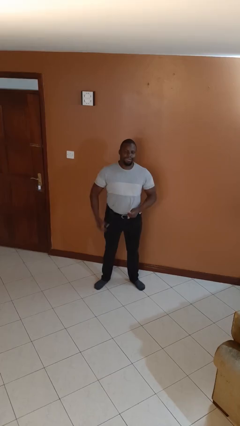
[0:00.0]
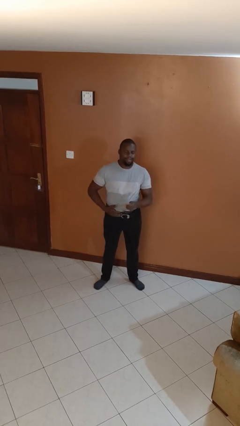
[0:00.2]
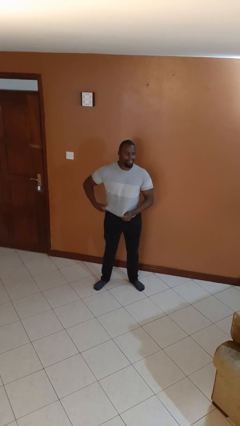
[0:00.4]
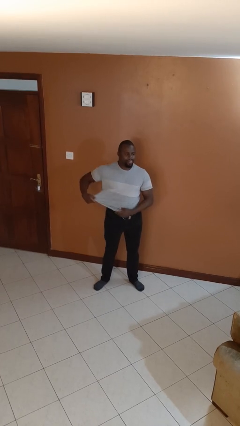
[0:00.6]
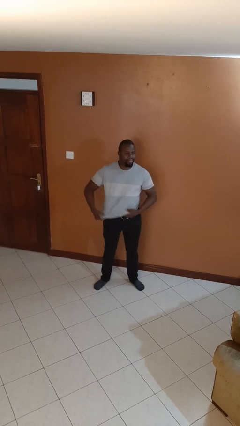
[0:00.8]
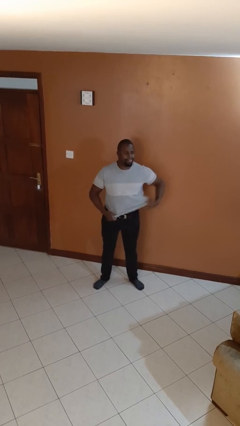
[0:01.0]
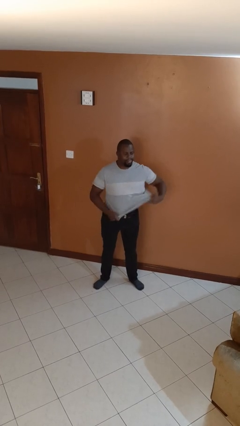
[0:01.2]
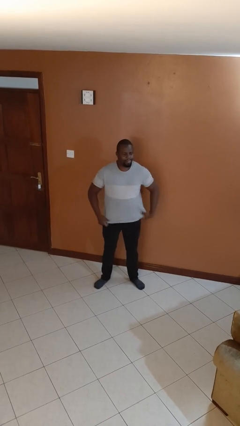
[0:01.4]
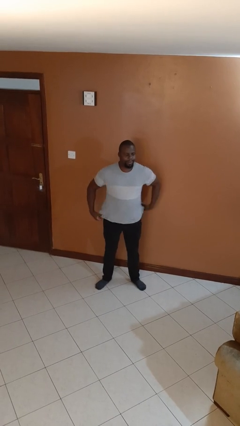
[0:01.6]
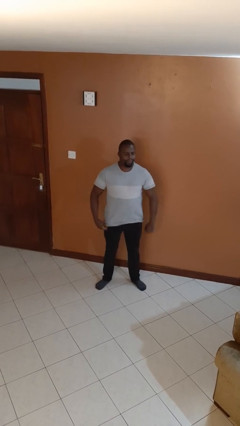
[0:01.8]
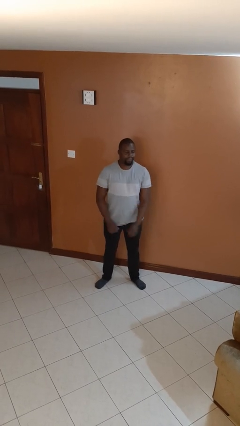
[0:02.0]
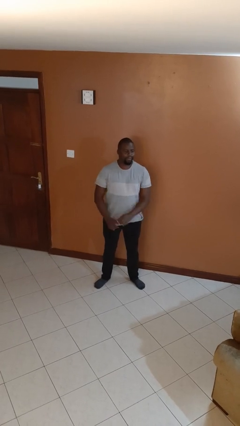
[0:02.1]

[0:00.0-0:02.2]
person untucks shirt

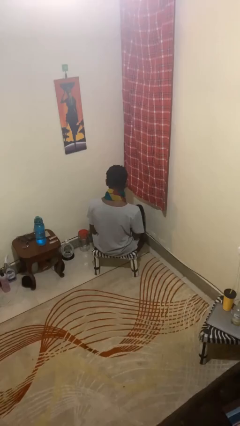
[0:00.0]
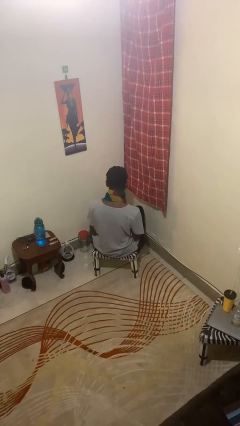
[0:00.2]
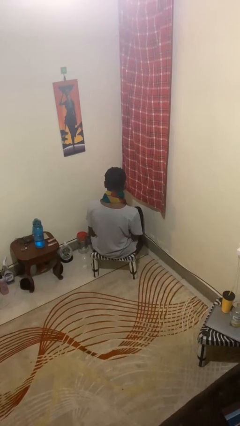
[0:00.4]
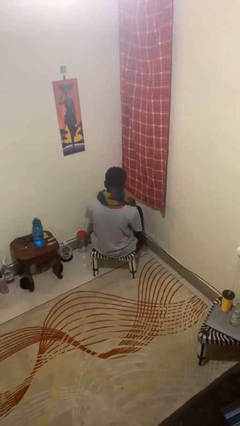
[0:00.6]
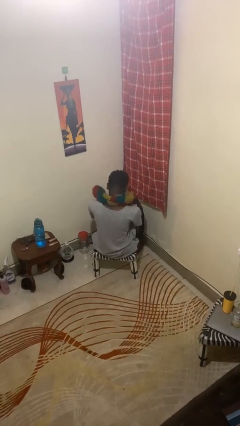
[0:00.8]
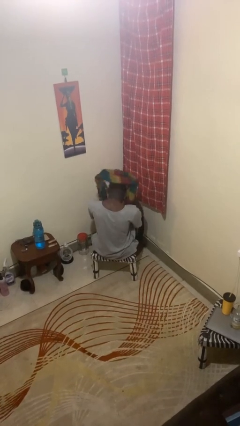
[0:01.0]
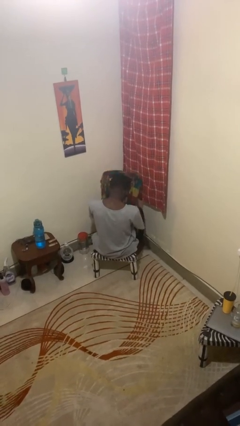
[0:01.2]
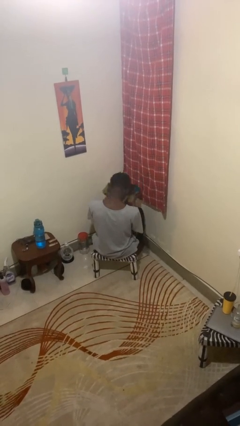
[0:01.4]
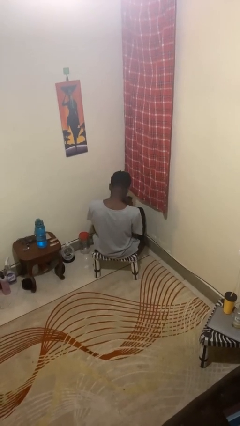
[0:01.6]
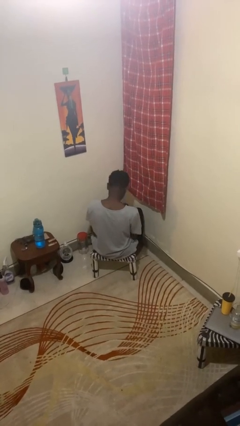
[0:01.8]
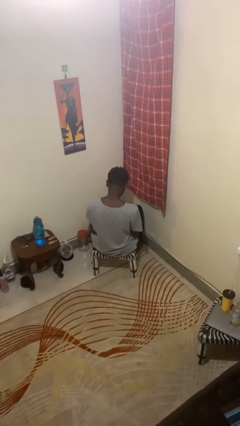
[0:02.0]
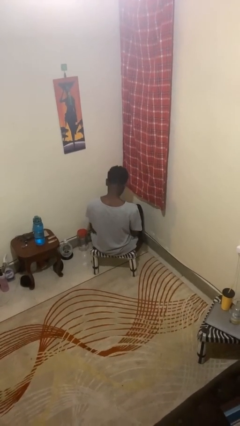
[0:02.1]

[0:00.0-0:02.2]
person takes off scarf

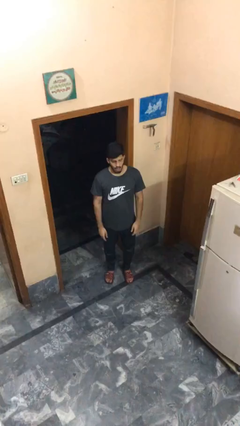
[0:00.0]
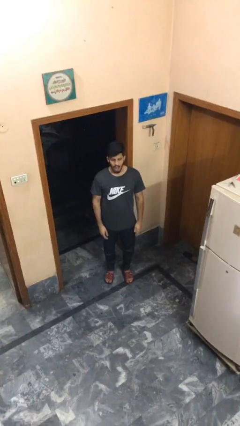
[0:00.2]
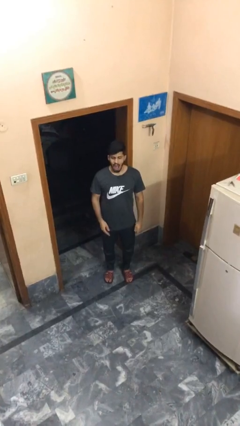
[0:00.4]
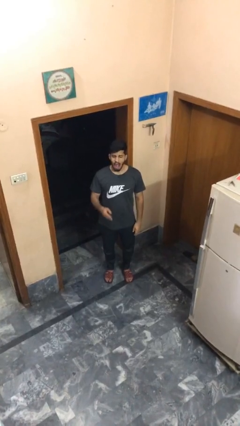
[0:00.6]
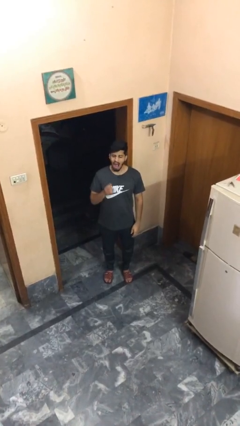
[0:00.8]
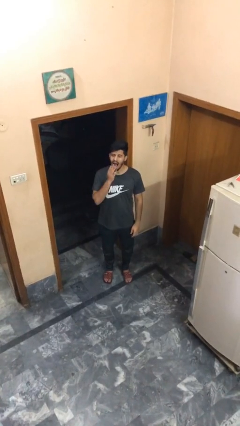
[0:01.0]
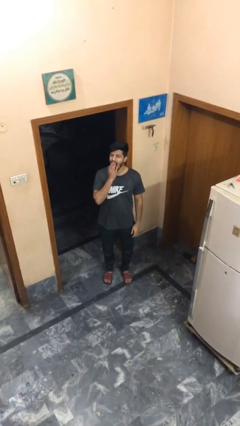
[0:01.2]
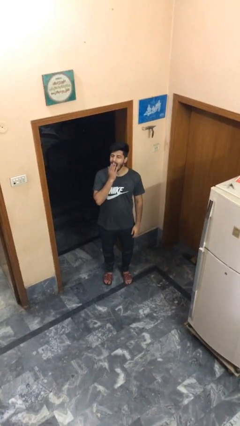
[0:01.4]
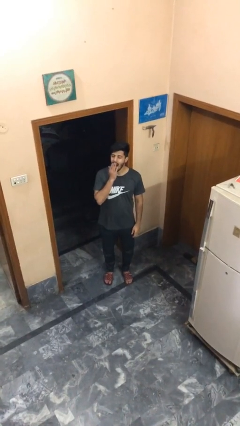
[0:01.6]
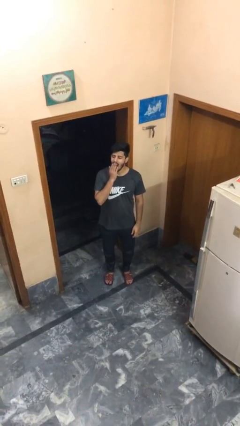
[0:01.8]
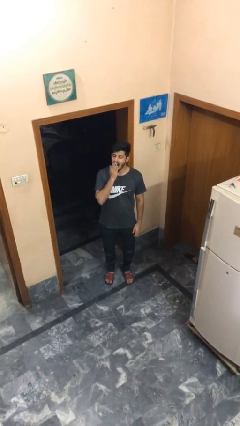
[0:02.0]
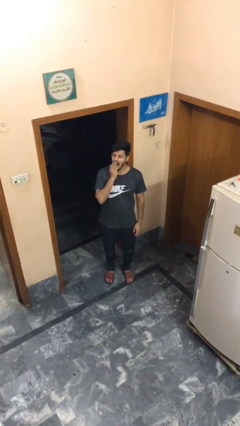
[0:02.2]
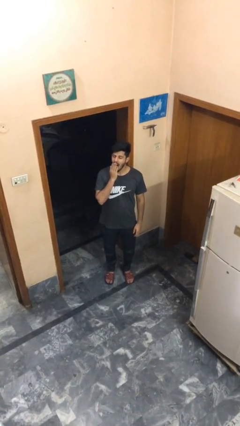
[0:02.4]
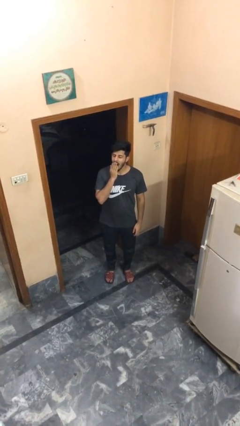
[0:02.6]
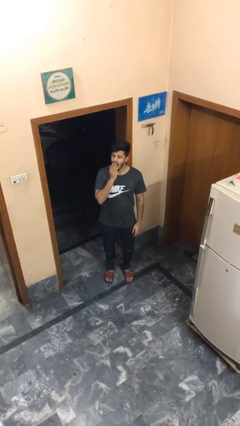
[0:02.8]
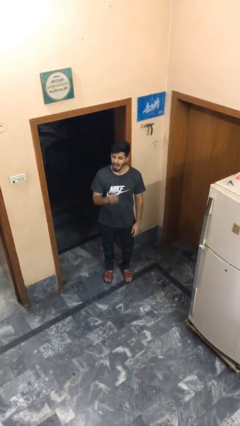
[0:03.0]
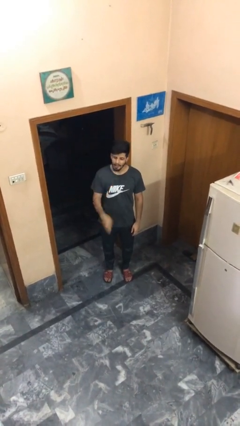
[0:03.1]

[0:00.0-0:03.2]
person yawns

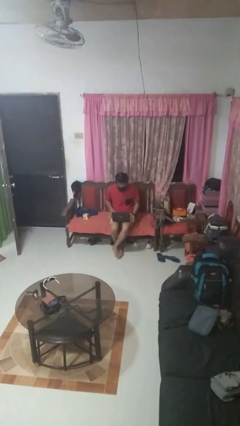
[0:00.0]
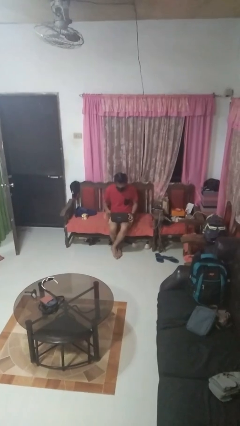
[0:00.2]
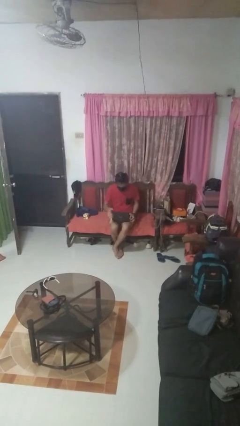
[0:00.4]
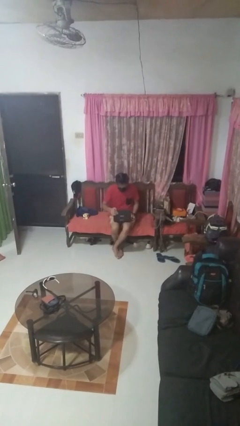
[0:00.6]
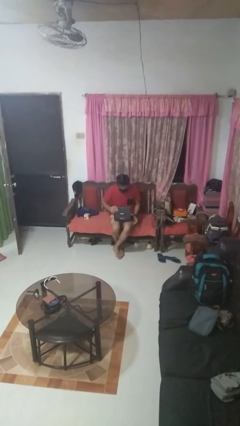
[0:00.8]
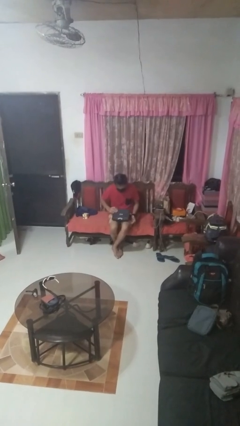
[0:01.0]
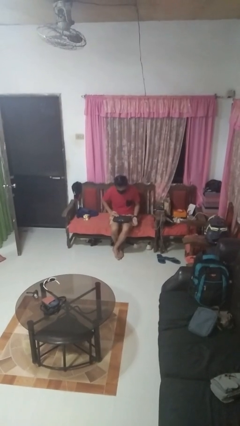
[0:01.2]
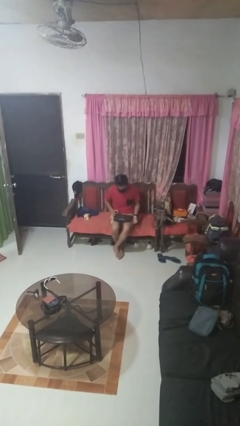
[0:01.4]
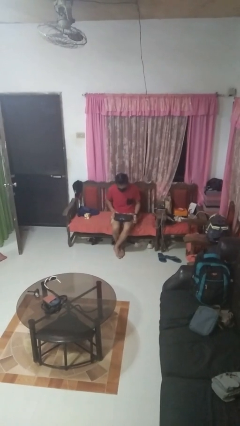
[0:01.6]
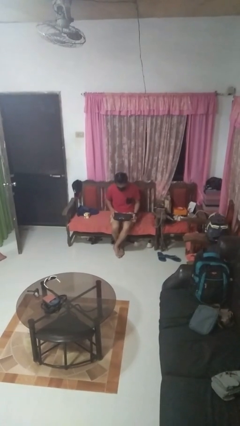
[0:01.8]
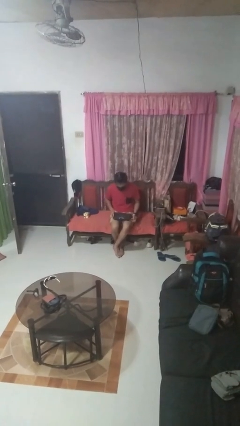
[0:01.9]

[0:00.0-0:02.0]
person closes laptop

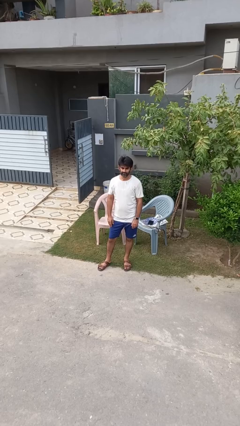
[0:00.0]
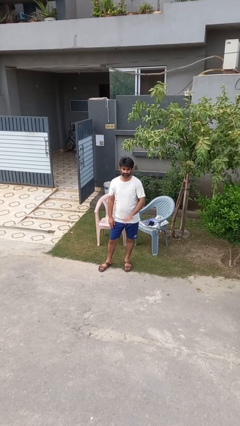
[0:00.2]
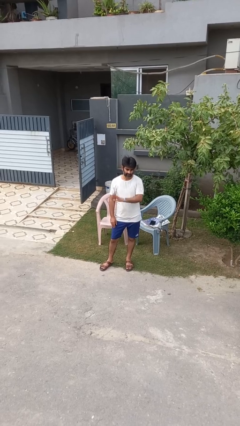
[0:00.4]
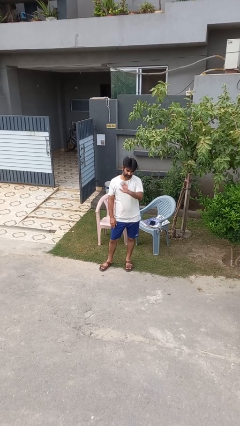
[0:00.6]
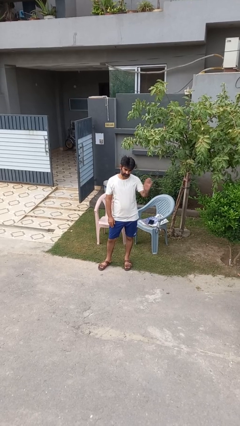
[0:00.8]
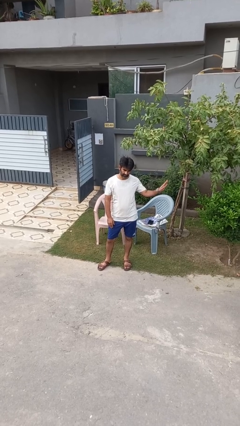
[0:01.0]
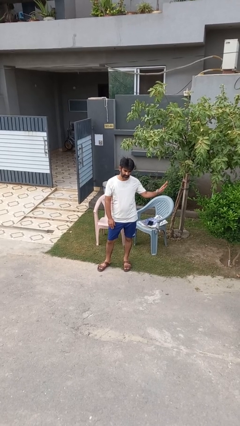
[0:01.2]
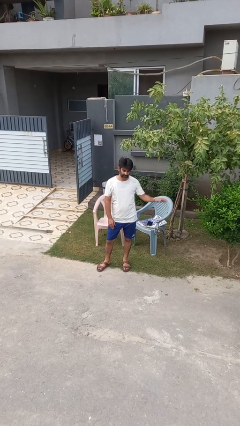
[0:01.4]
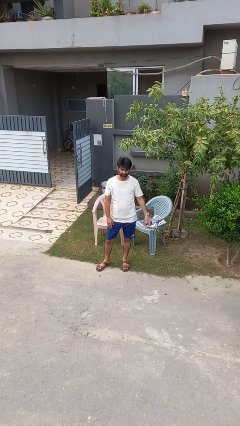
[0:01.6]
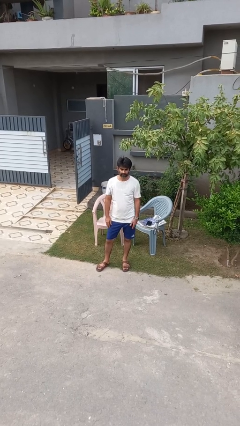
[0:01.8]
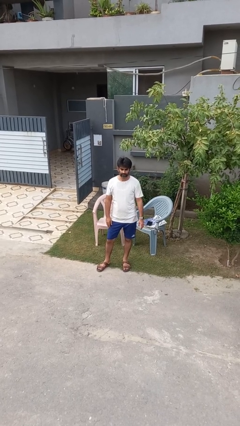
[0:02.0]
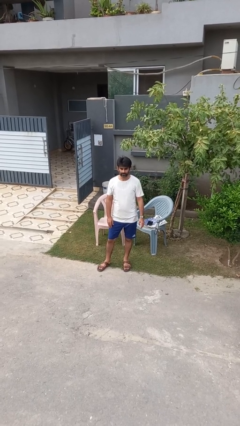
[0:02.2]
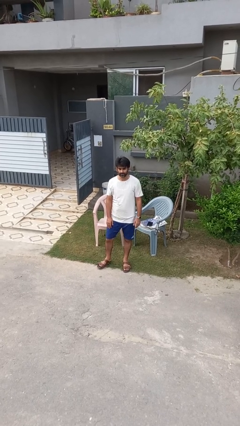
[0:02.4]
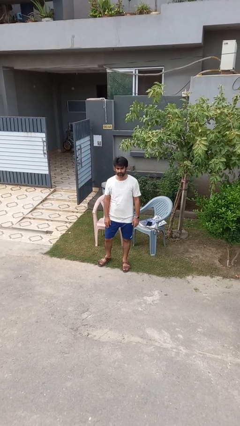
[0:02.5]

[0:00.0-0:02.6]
person gestures swipe left

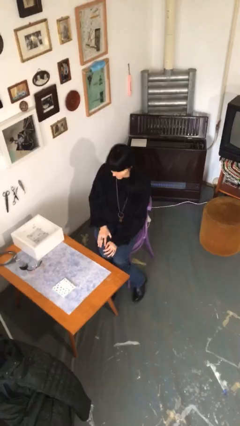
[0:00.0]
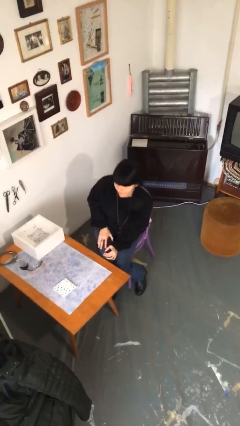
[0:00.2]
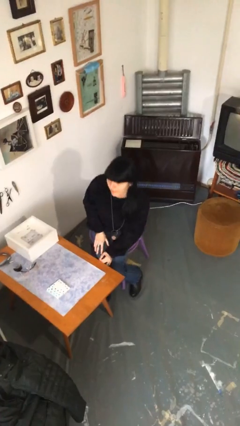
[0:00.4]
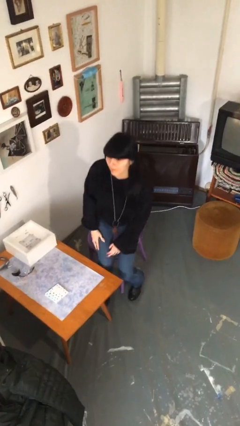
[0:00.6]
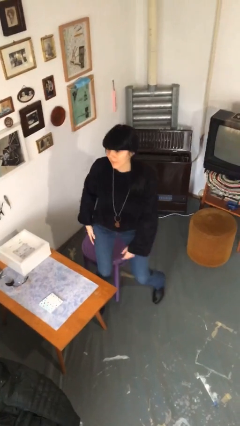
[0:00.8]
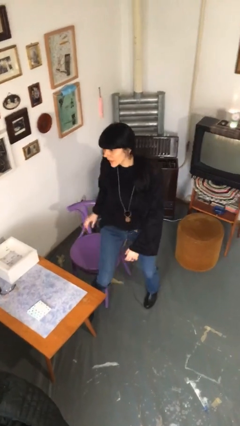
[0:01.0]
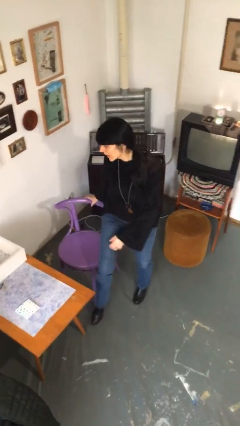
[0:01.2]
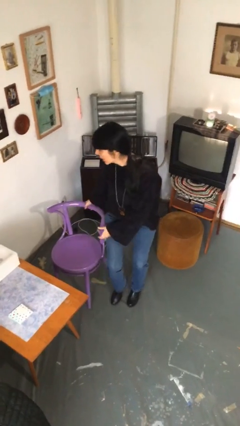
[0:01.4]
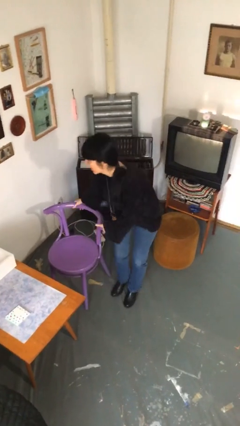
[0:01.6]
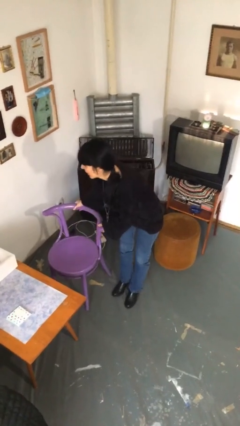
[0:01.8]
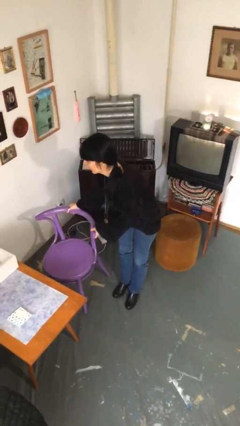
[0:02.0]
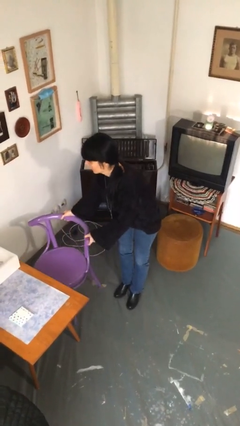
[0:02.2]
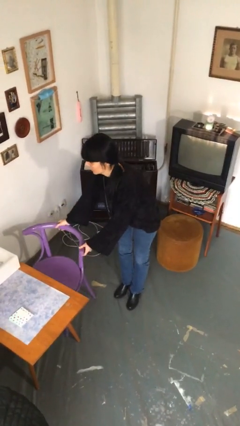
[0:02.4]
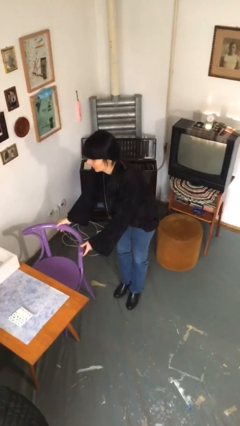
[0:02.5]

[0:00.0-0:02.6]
person stands up

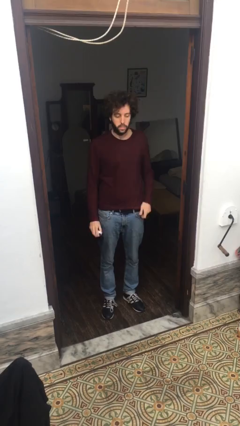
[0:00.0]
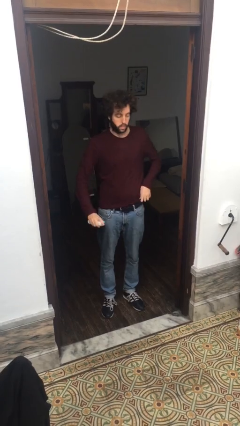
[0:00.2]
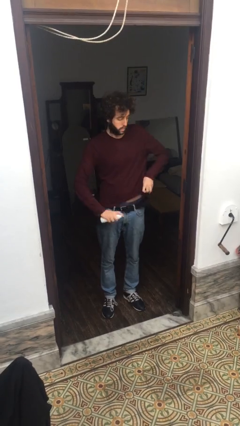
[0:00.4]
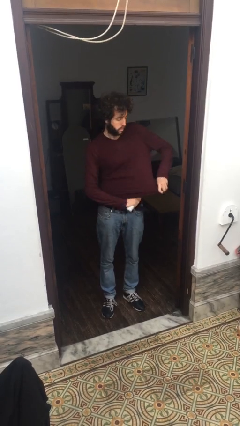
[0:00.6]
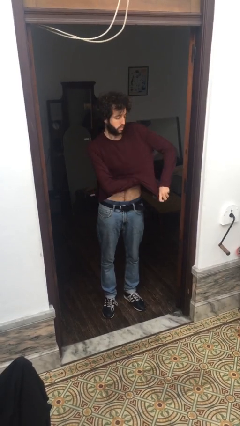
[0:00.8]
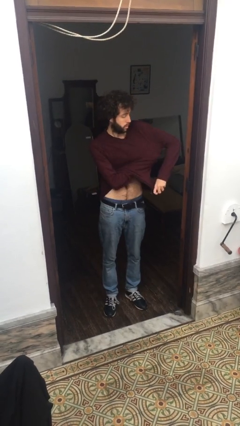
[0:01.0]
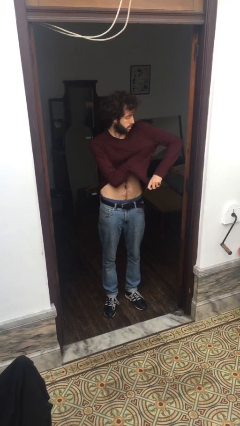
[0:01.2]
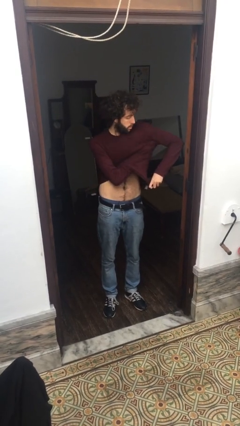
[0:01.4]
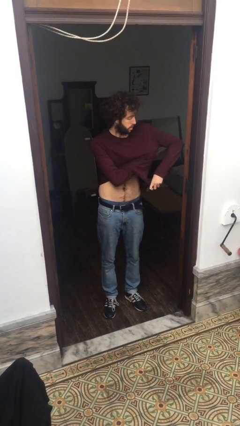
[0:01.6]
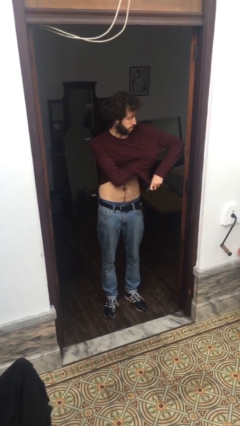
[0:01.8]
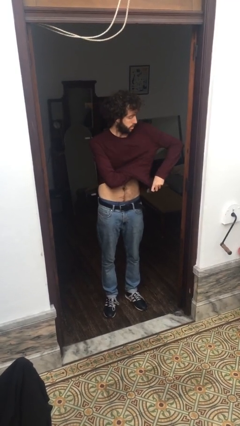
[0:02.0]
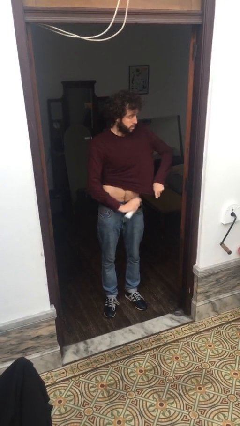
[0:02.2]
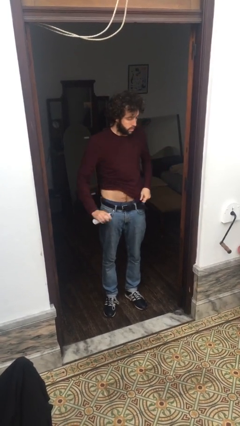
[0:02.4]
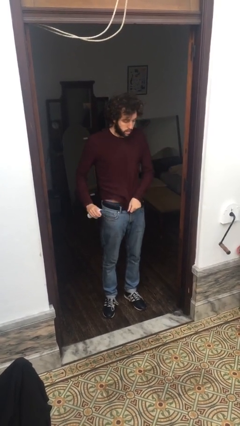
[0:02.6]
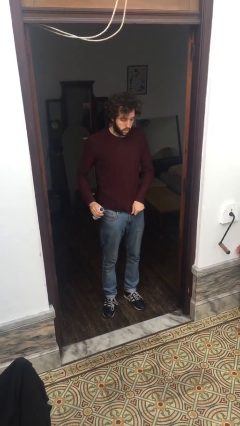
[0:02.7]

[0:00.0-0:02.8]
person applies deodorant
